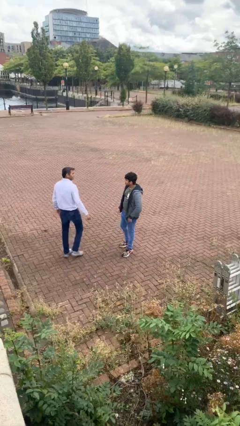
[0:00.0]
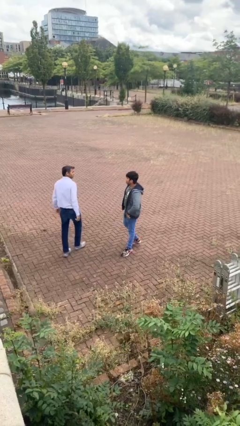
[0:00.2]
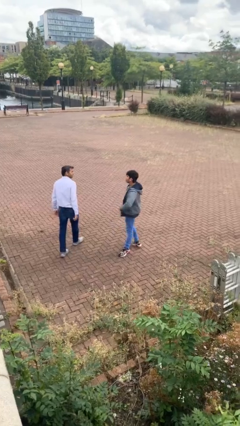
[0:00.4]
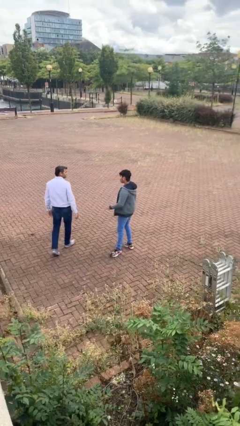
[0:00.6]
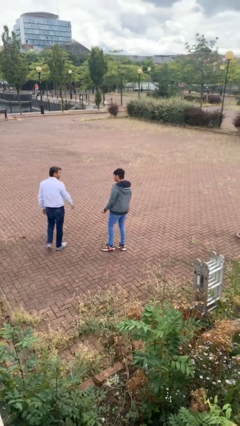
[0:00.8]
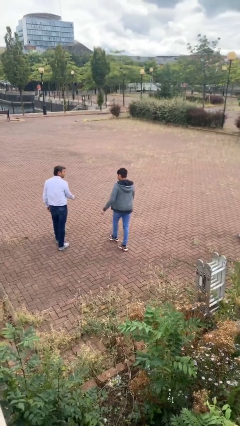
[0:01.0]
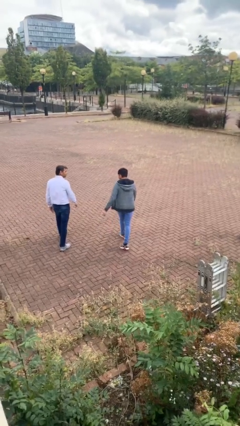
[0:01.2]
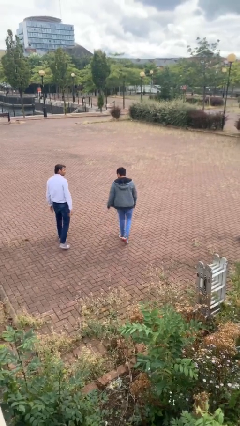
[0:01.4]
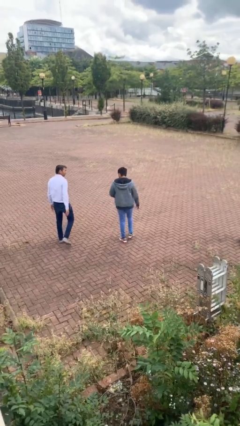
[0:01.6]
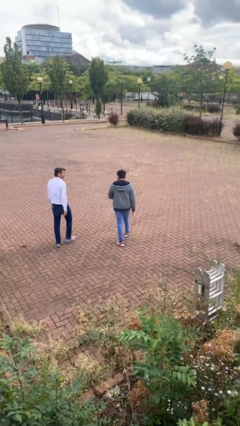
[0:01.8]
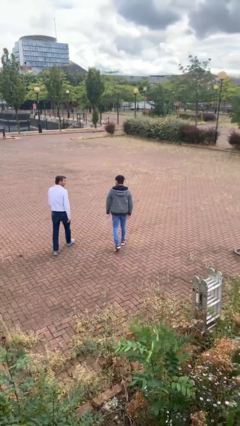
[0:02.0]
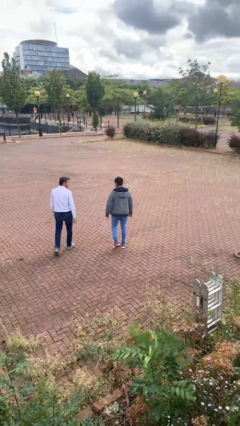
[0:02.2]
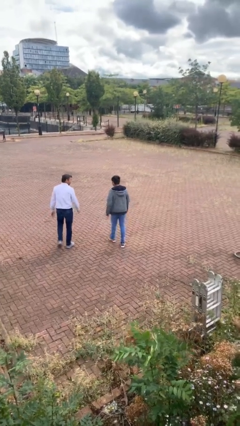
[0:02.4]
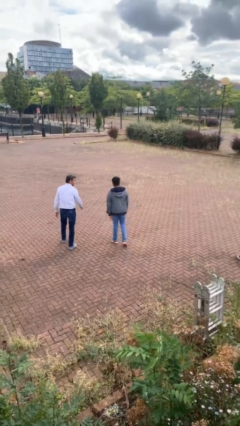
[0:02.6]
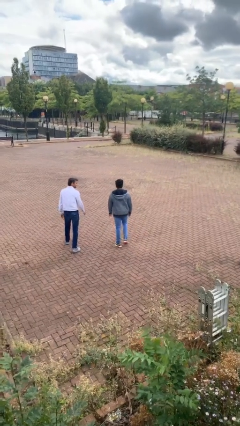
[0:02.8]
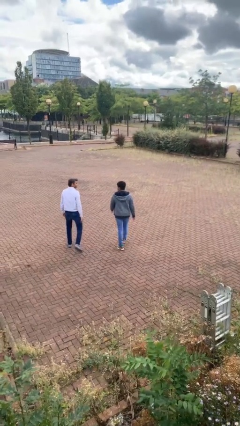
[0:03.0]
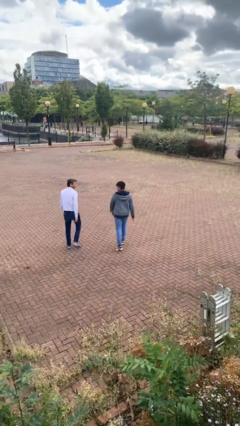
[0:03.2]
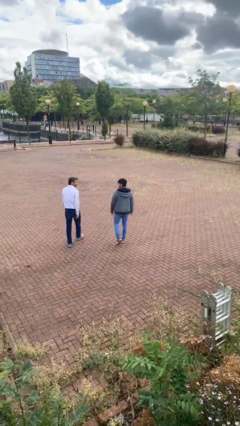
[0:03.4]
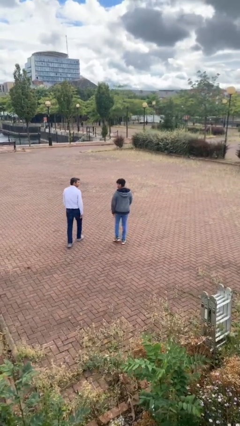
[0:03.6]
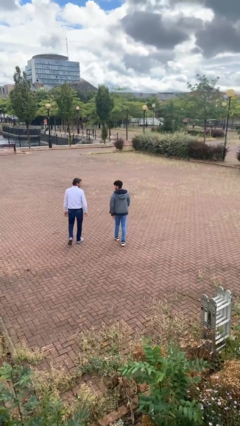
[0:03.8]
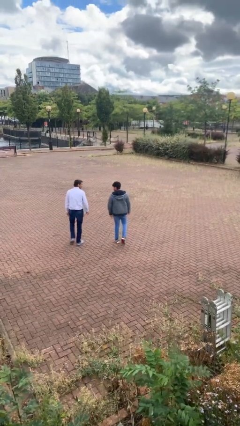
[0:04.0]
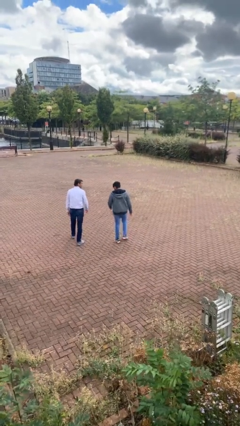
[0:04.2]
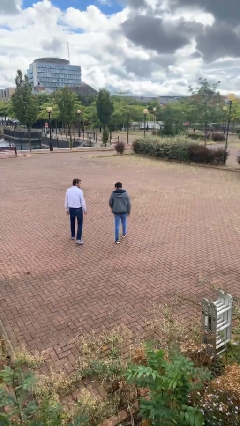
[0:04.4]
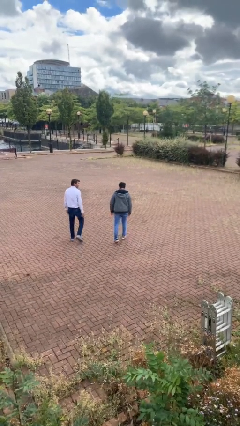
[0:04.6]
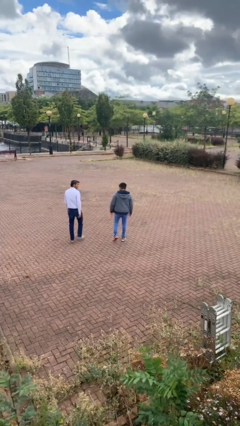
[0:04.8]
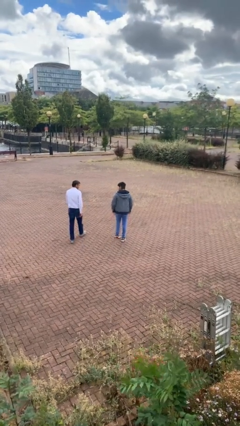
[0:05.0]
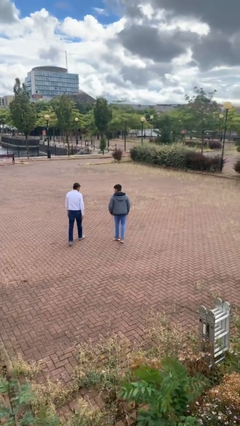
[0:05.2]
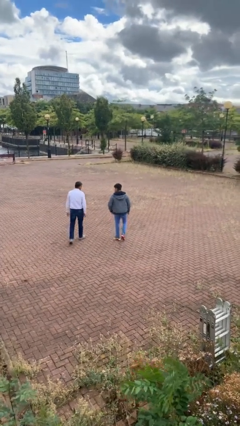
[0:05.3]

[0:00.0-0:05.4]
person talks to person

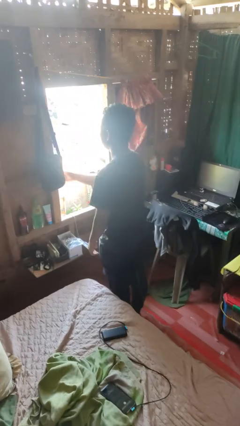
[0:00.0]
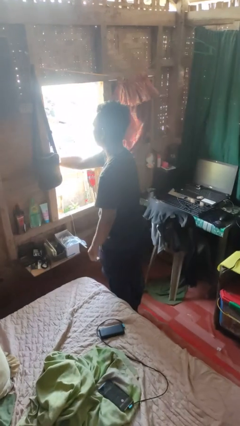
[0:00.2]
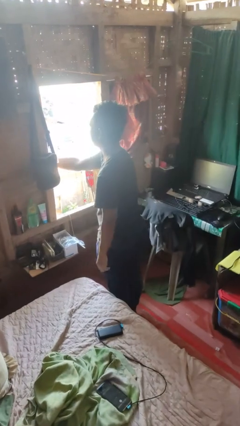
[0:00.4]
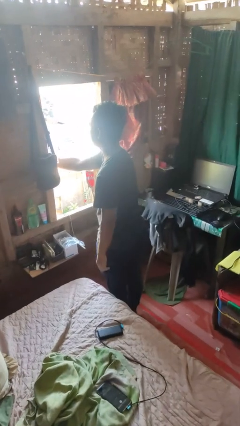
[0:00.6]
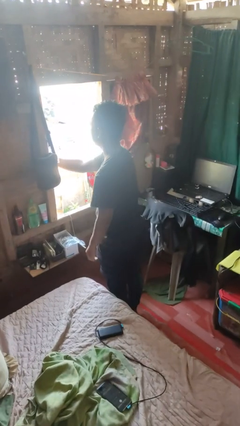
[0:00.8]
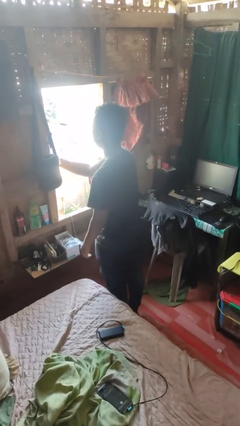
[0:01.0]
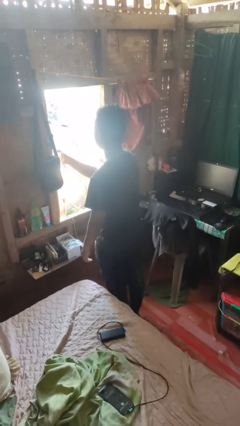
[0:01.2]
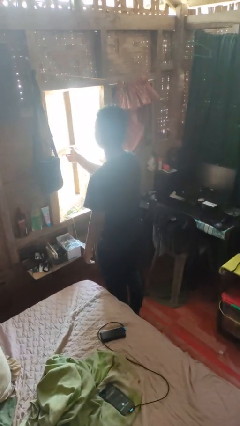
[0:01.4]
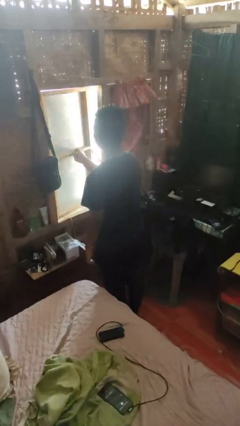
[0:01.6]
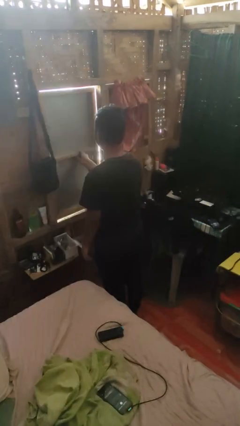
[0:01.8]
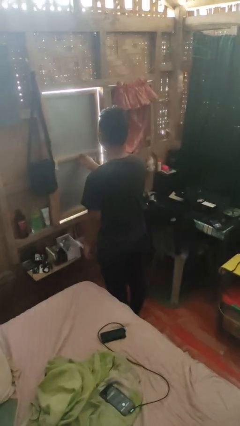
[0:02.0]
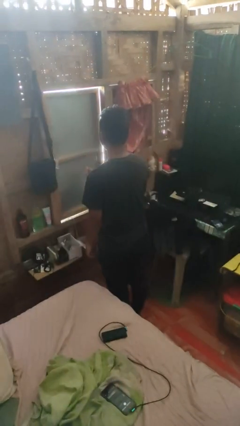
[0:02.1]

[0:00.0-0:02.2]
person closes home window

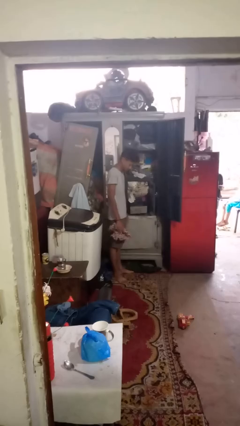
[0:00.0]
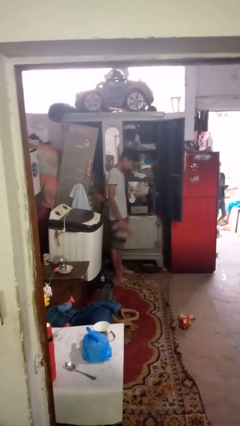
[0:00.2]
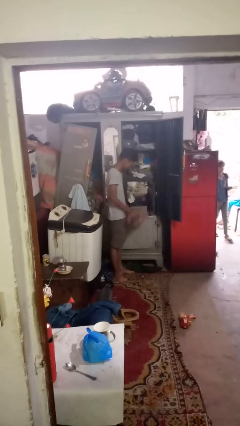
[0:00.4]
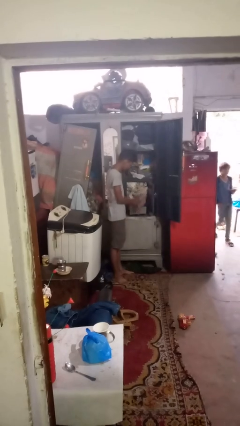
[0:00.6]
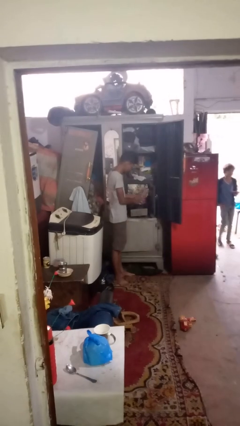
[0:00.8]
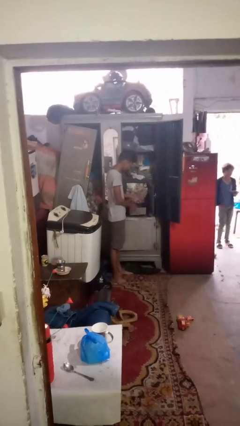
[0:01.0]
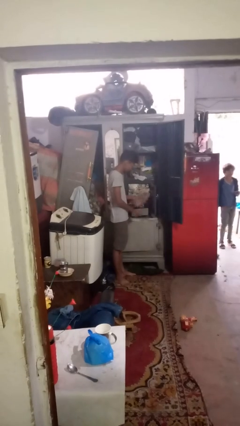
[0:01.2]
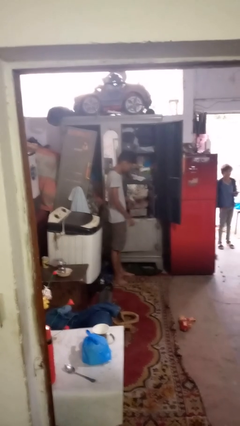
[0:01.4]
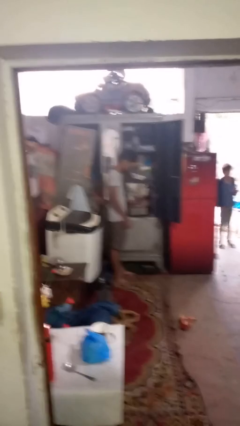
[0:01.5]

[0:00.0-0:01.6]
person puts clothes into dresser

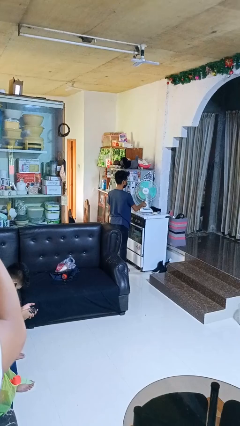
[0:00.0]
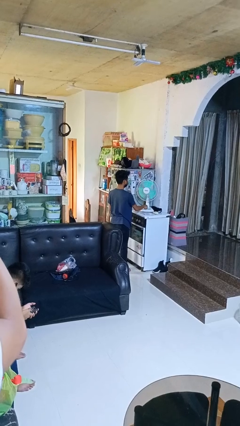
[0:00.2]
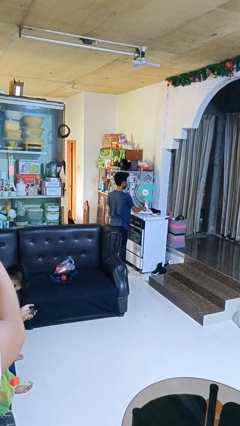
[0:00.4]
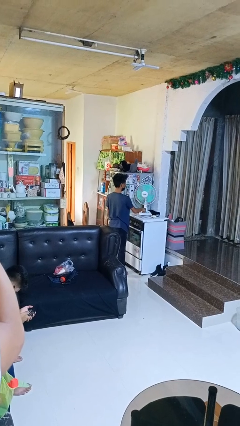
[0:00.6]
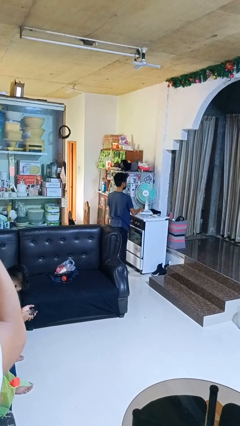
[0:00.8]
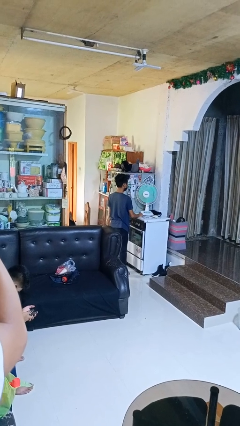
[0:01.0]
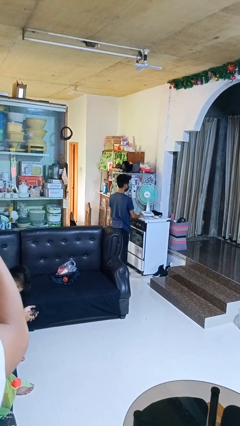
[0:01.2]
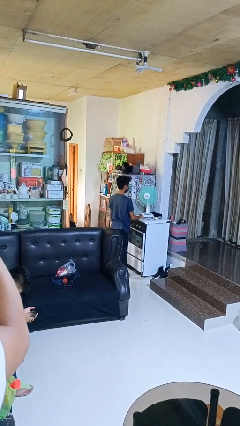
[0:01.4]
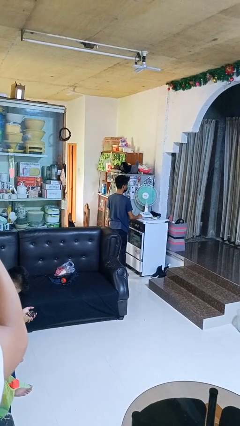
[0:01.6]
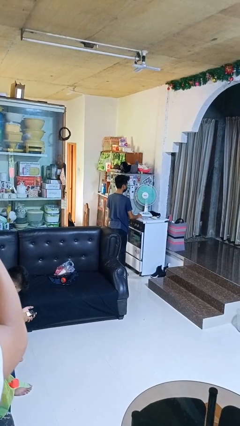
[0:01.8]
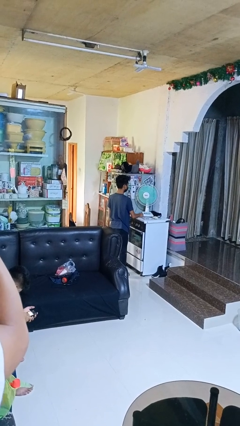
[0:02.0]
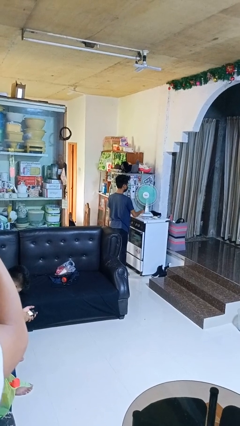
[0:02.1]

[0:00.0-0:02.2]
person turns on fan

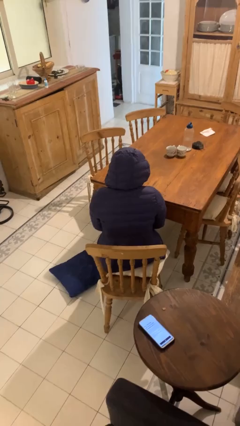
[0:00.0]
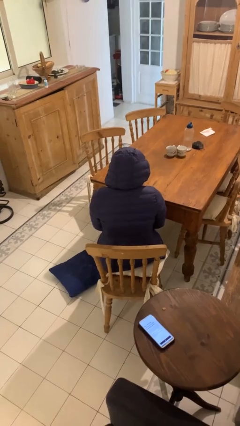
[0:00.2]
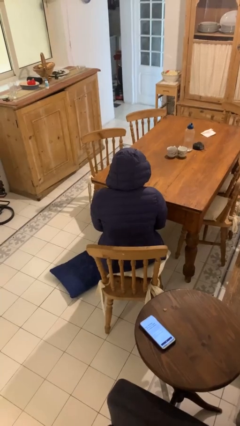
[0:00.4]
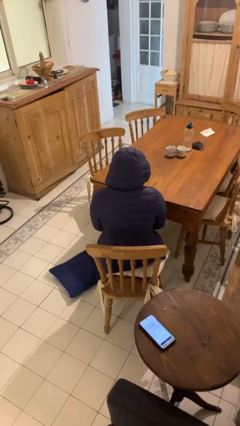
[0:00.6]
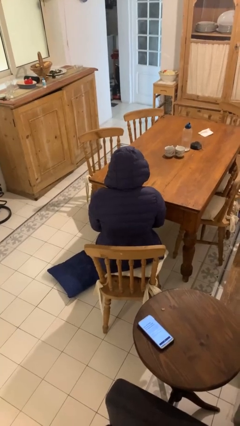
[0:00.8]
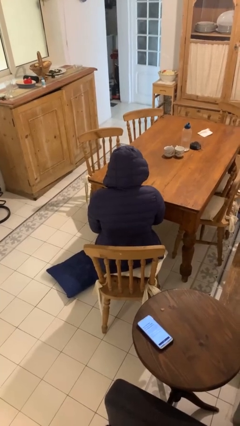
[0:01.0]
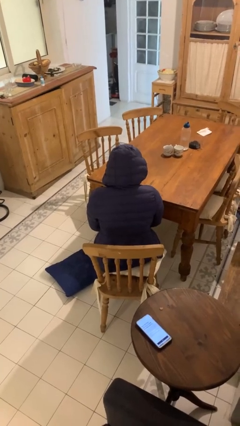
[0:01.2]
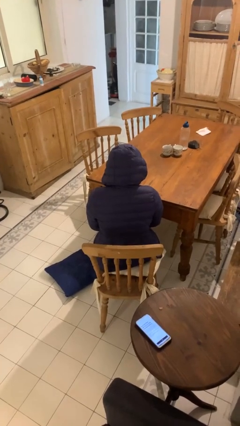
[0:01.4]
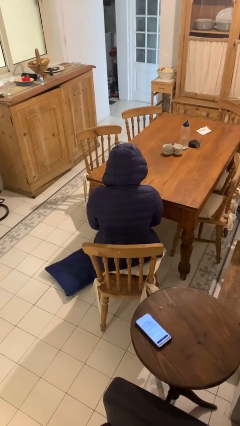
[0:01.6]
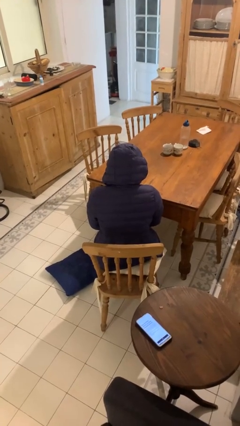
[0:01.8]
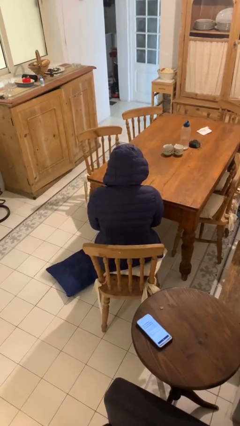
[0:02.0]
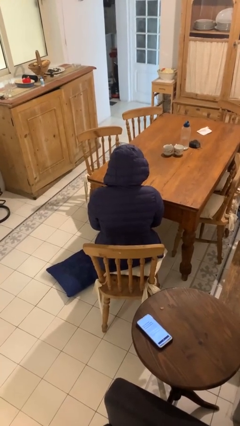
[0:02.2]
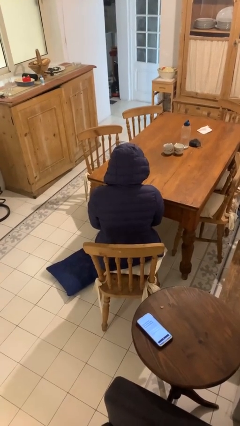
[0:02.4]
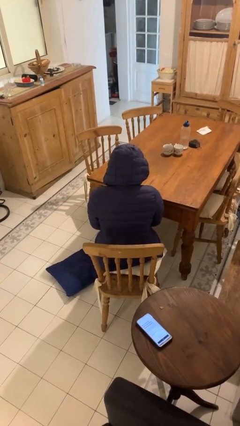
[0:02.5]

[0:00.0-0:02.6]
person falls from chair

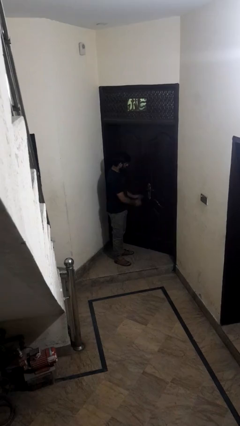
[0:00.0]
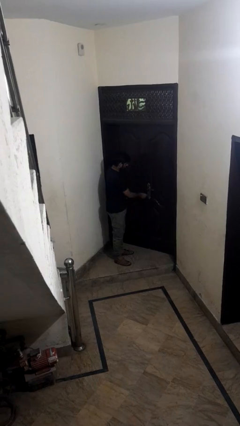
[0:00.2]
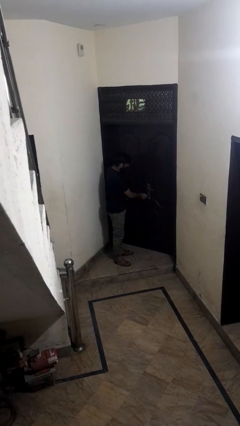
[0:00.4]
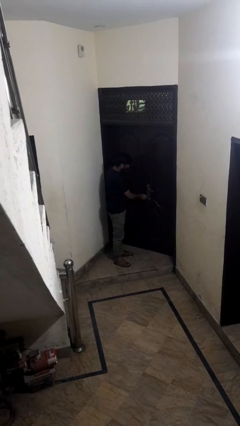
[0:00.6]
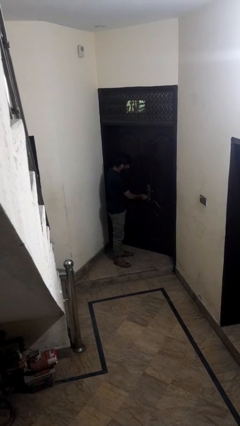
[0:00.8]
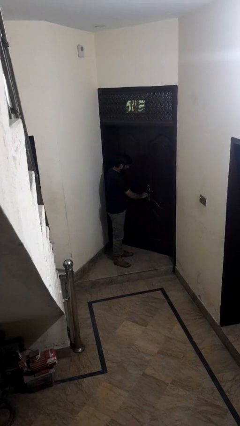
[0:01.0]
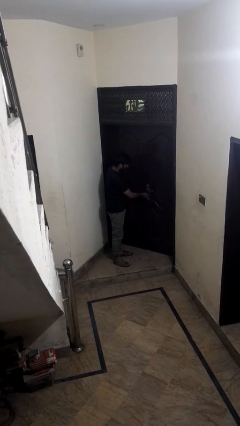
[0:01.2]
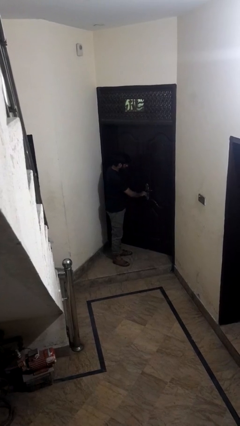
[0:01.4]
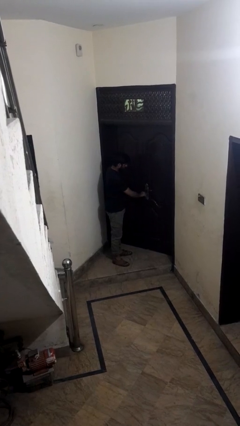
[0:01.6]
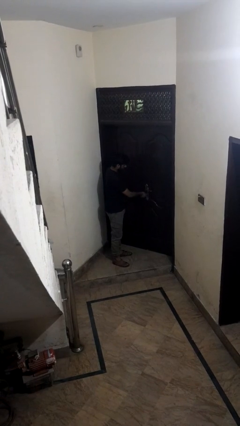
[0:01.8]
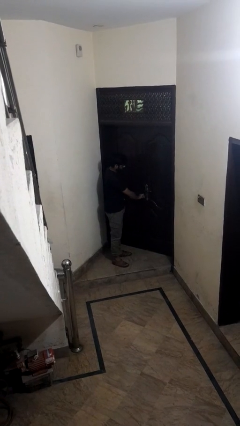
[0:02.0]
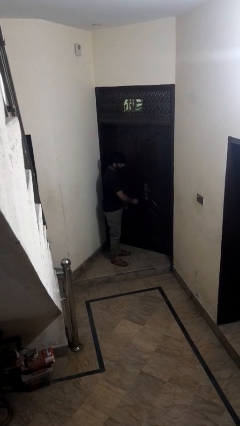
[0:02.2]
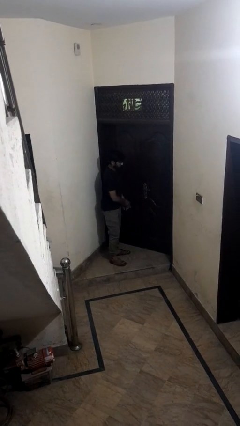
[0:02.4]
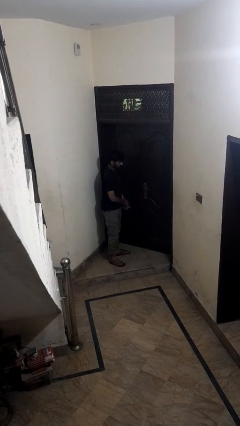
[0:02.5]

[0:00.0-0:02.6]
person locks door with keys

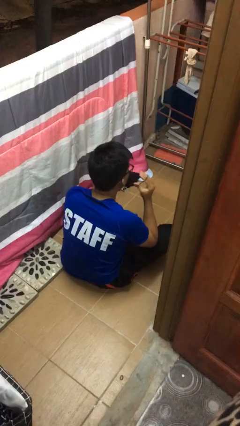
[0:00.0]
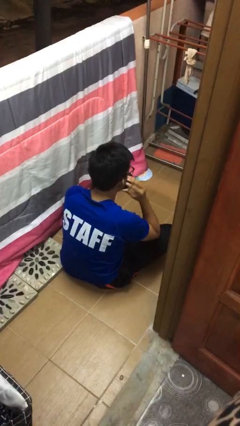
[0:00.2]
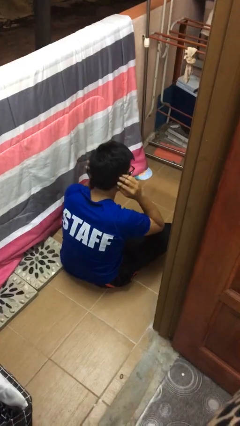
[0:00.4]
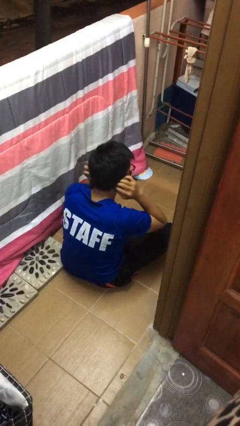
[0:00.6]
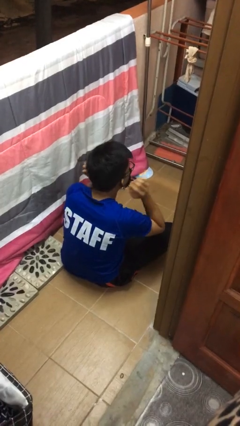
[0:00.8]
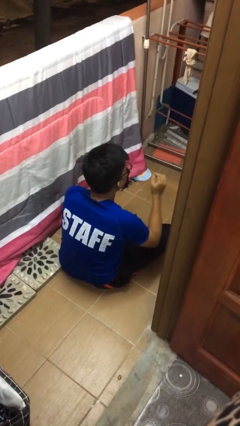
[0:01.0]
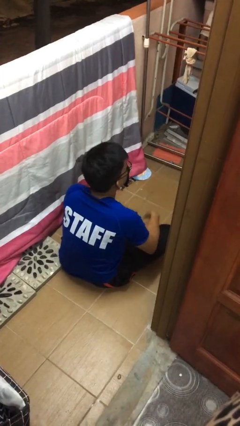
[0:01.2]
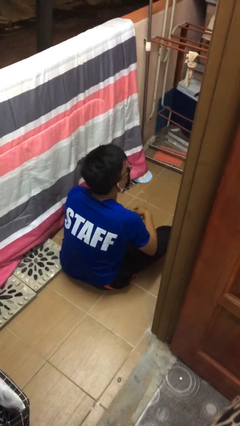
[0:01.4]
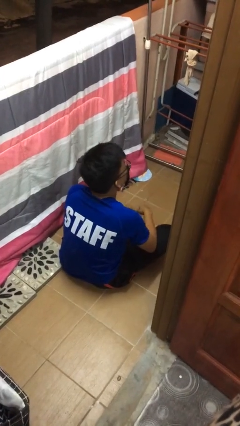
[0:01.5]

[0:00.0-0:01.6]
person puts on facemask
